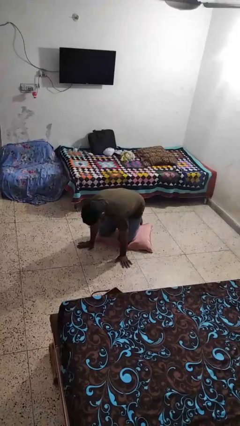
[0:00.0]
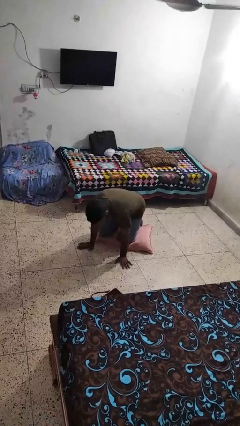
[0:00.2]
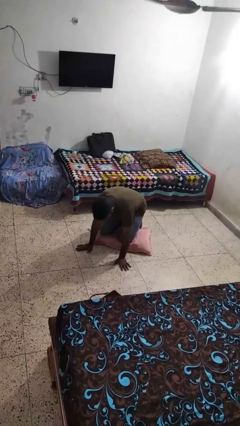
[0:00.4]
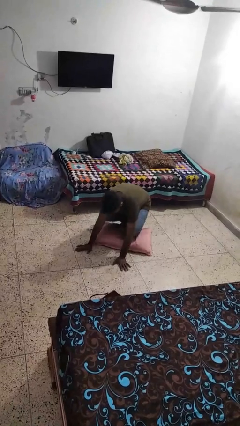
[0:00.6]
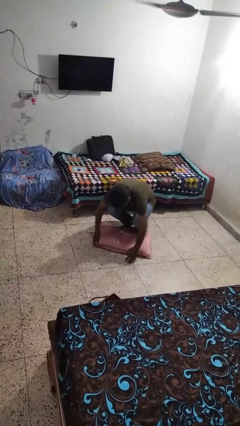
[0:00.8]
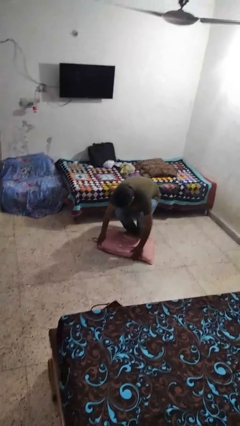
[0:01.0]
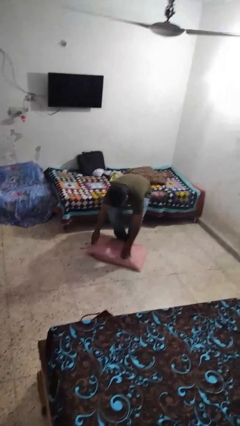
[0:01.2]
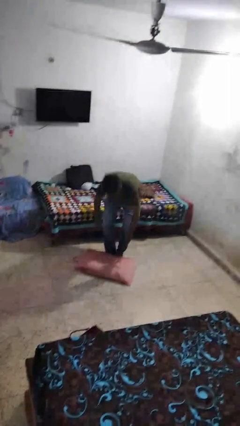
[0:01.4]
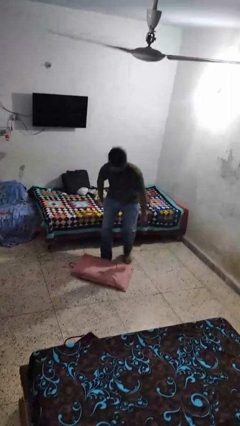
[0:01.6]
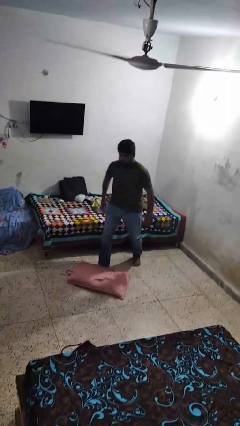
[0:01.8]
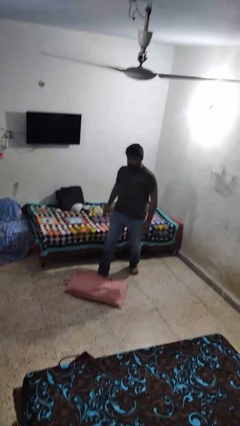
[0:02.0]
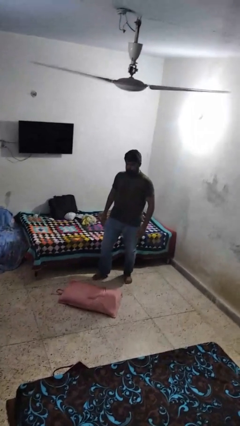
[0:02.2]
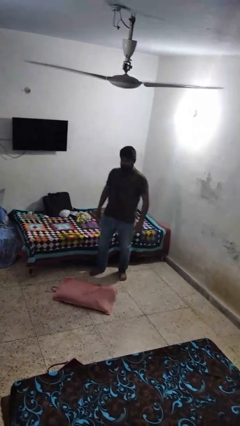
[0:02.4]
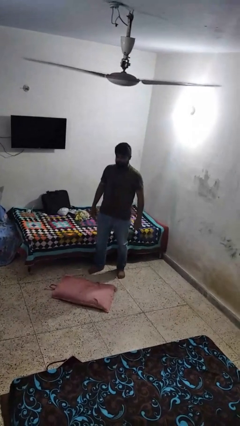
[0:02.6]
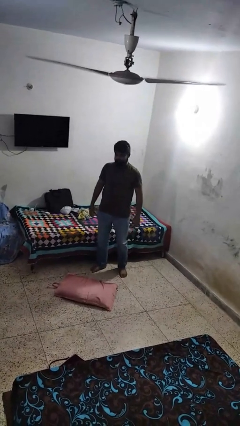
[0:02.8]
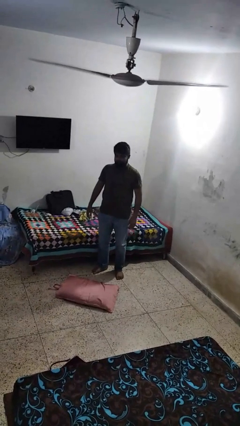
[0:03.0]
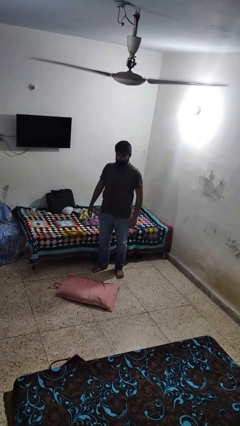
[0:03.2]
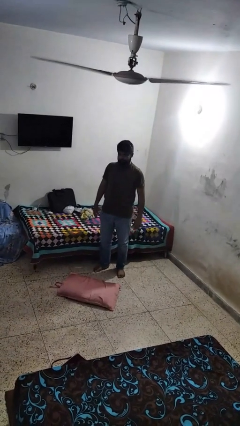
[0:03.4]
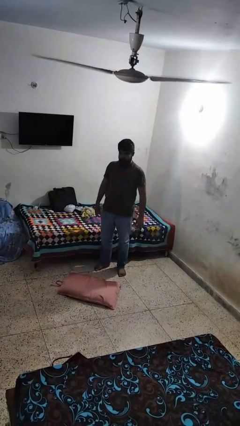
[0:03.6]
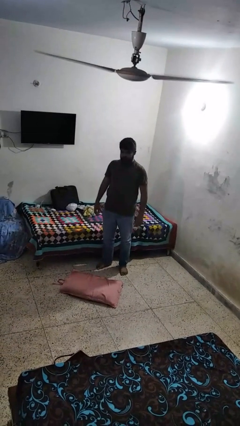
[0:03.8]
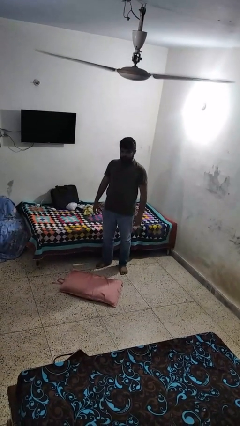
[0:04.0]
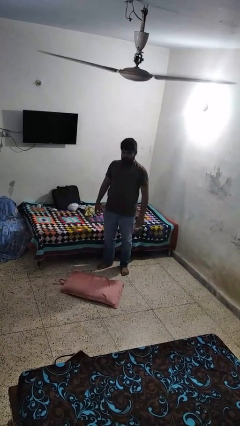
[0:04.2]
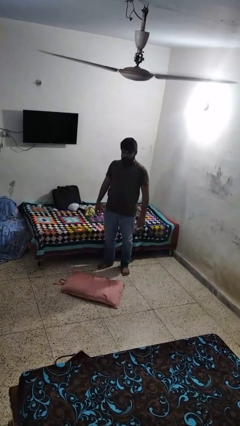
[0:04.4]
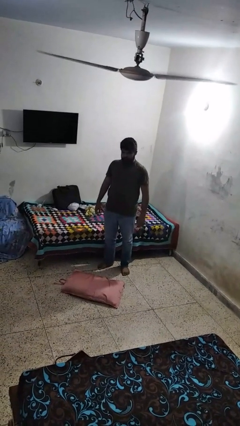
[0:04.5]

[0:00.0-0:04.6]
person stands up from floor

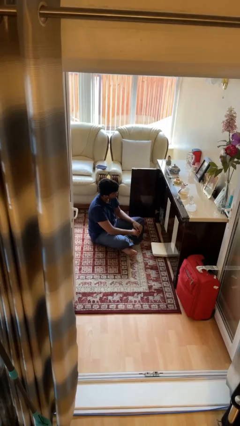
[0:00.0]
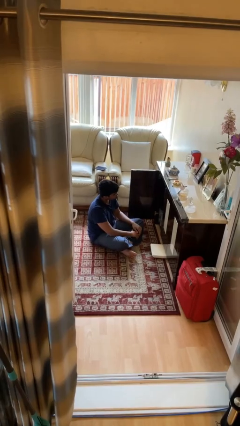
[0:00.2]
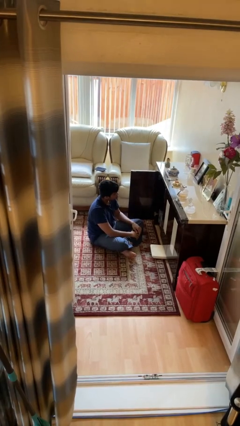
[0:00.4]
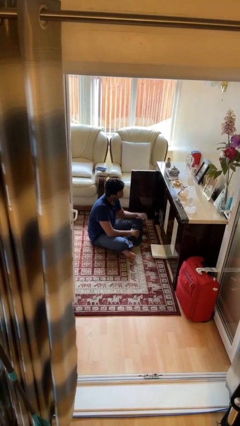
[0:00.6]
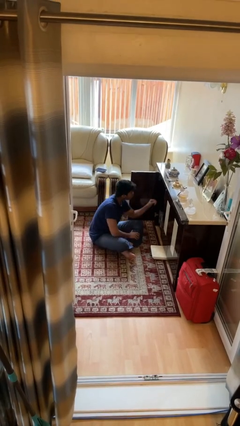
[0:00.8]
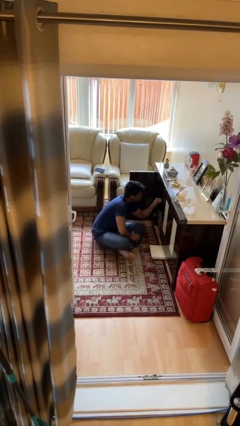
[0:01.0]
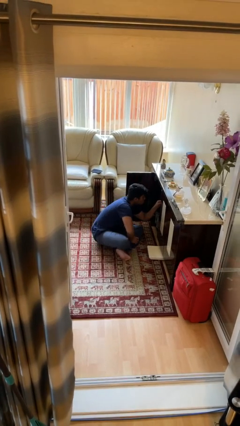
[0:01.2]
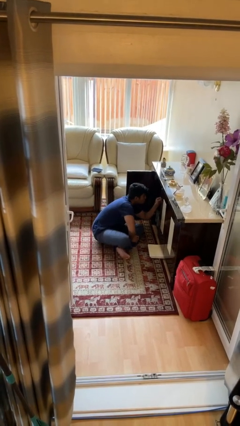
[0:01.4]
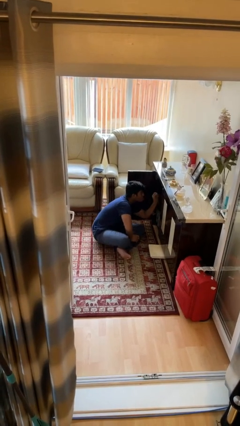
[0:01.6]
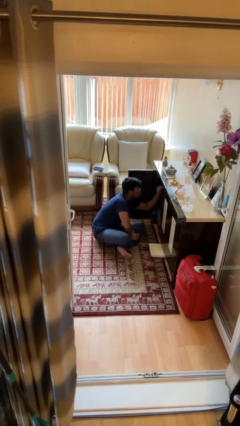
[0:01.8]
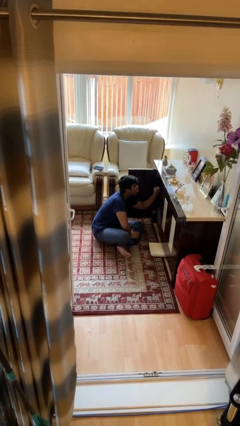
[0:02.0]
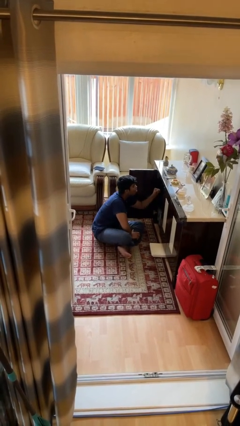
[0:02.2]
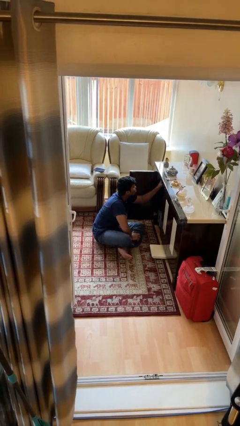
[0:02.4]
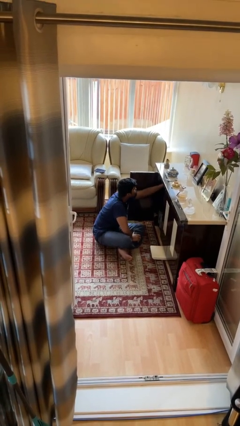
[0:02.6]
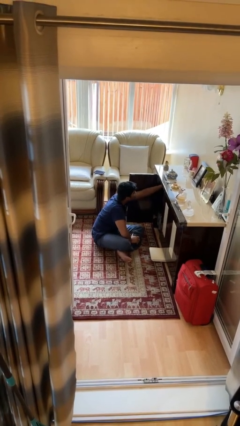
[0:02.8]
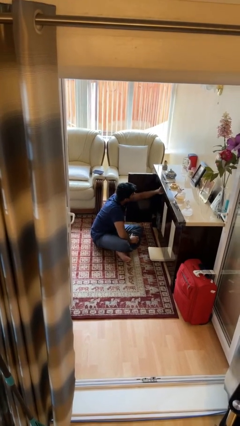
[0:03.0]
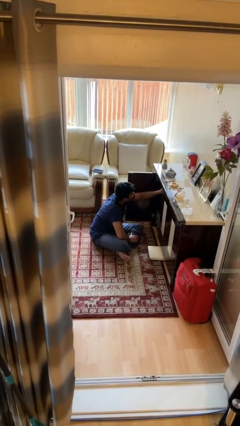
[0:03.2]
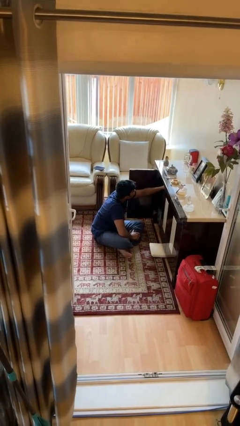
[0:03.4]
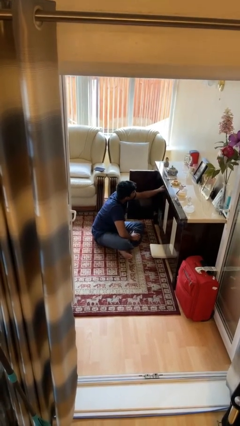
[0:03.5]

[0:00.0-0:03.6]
person searches in cabinet

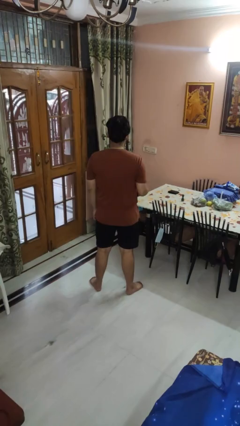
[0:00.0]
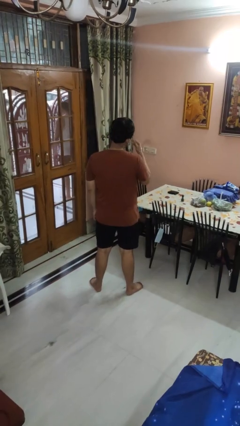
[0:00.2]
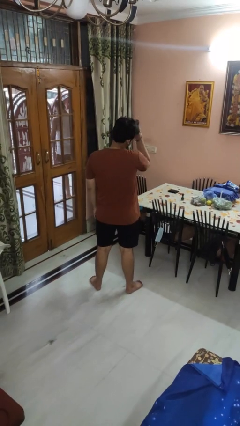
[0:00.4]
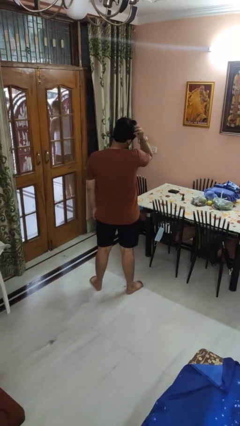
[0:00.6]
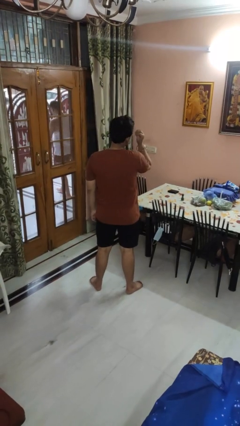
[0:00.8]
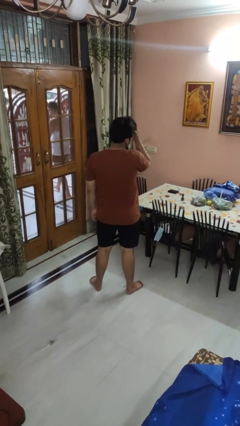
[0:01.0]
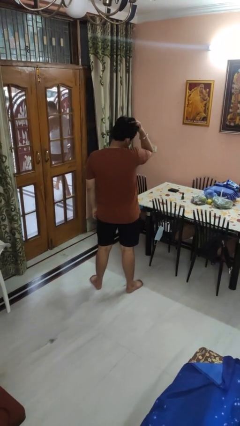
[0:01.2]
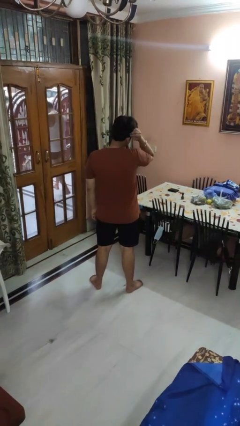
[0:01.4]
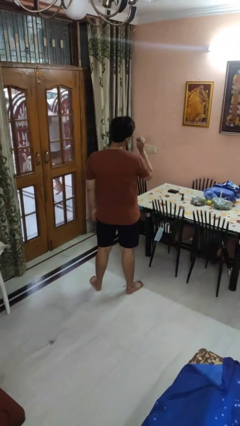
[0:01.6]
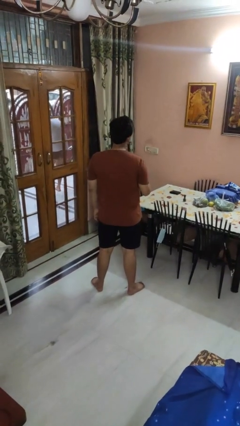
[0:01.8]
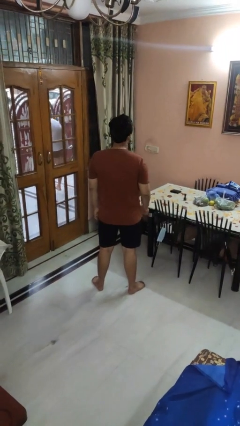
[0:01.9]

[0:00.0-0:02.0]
person strokes hair

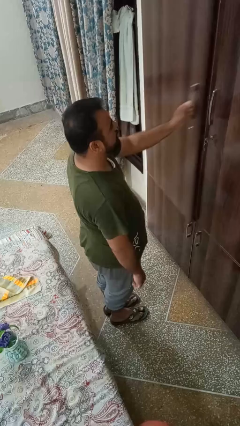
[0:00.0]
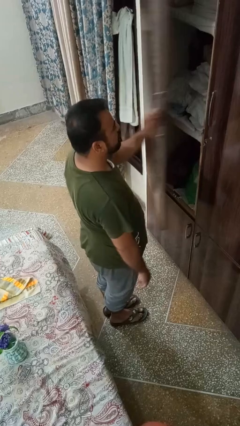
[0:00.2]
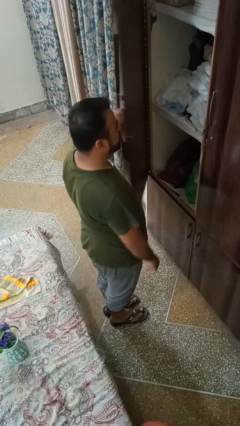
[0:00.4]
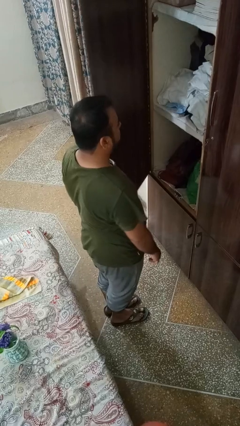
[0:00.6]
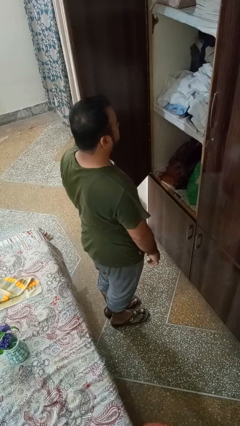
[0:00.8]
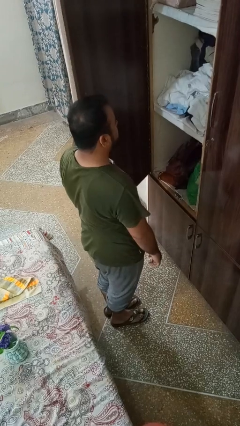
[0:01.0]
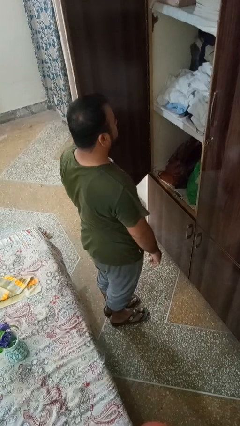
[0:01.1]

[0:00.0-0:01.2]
person opens closet door

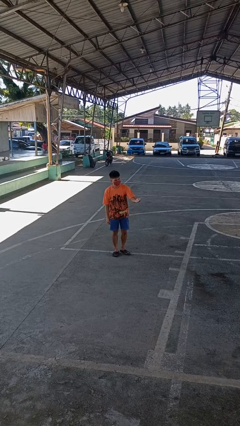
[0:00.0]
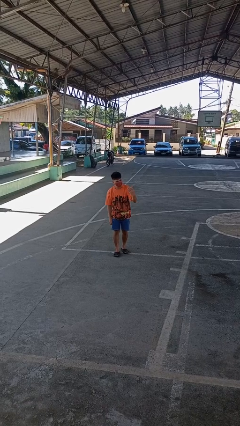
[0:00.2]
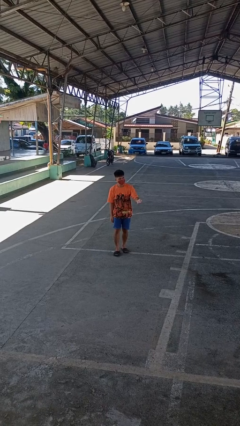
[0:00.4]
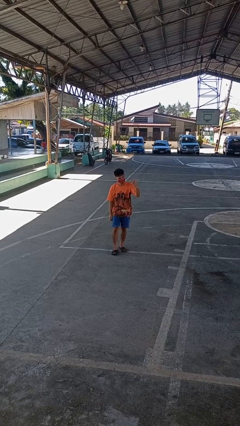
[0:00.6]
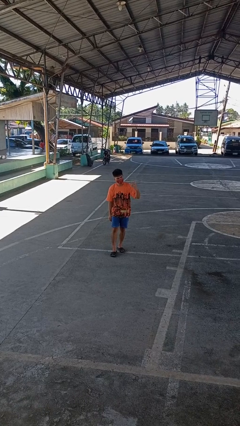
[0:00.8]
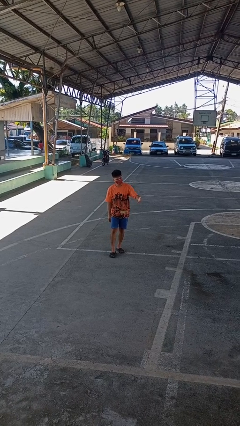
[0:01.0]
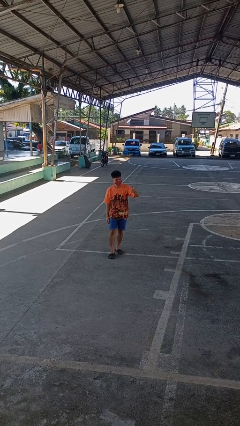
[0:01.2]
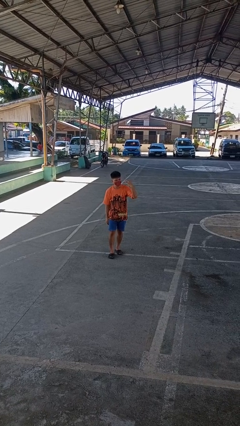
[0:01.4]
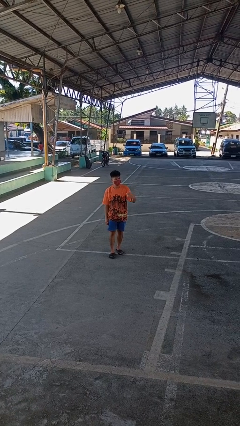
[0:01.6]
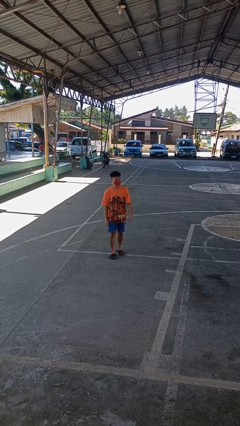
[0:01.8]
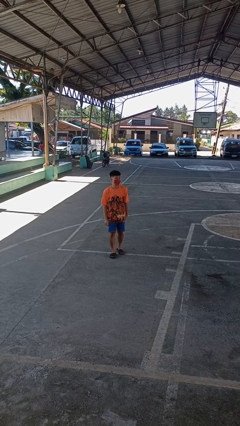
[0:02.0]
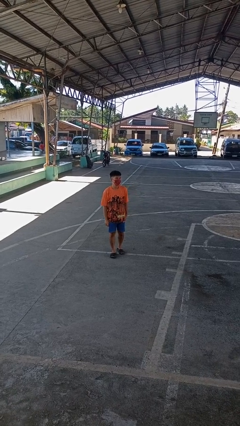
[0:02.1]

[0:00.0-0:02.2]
person gestures come here

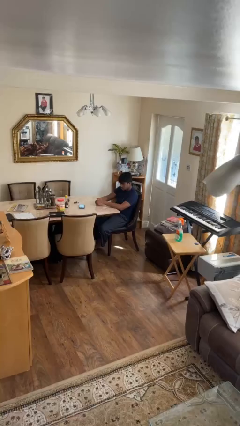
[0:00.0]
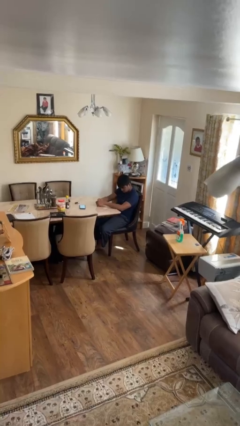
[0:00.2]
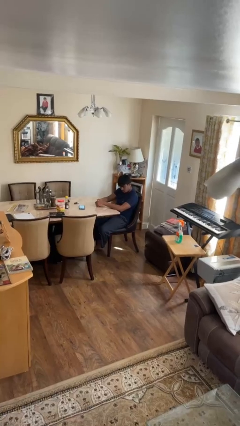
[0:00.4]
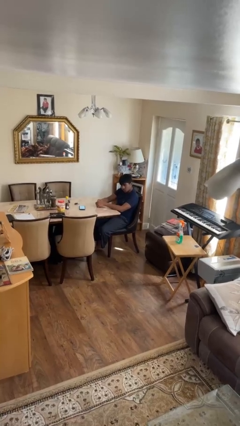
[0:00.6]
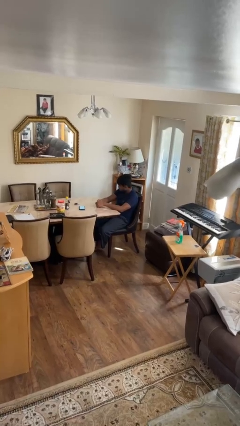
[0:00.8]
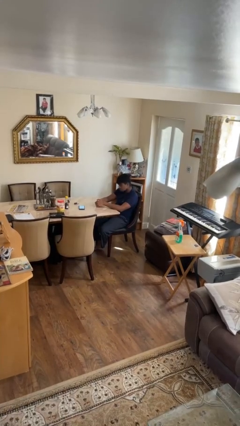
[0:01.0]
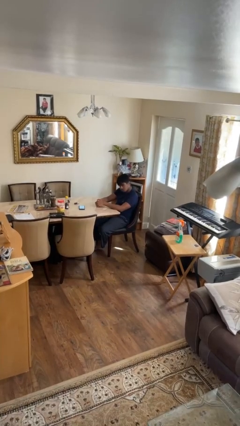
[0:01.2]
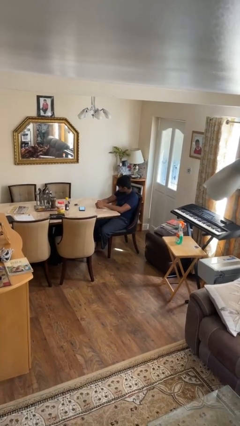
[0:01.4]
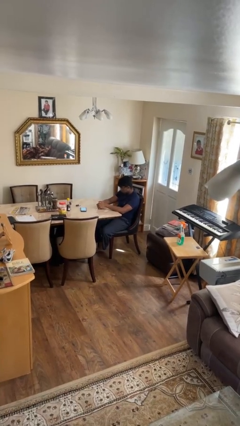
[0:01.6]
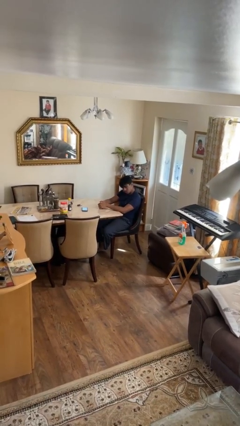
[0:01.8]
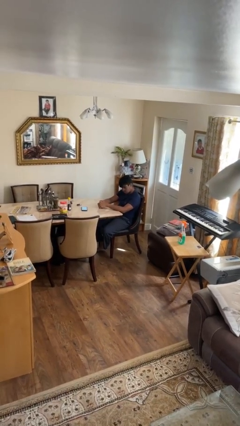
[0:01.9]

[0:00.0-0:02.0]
person shakes head

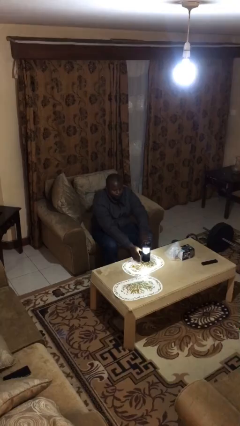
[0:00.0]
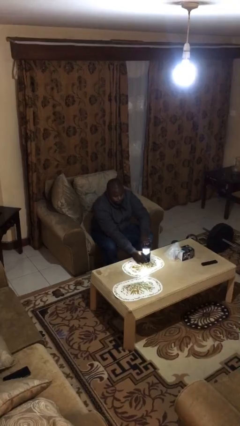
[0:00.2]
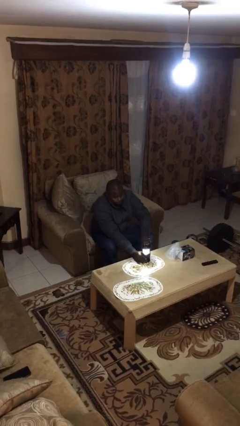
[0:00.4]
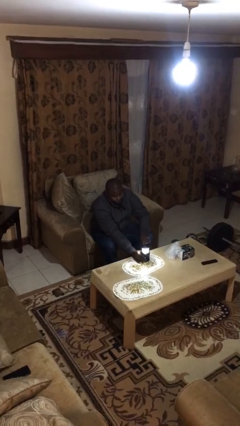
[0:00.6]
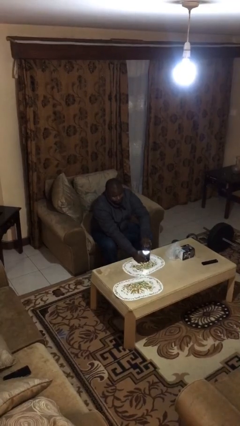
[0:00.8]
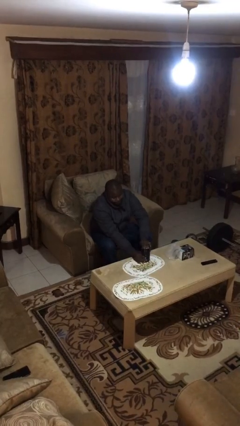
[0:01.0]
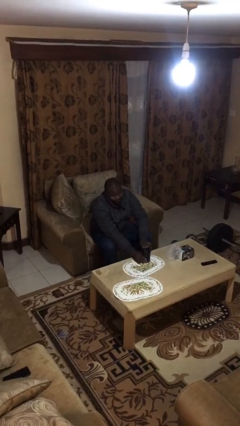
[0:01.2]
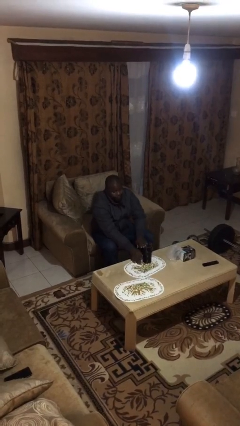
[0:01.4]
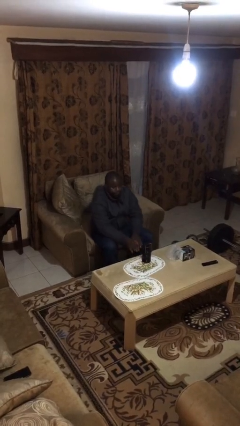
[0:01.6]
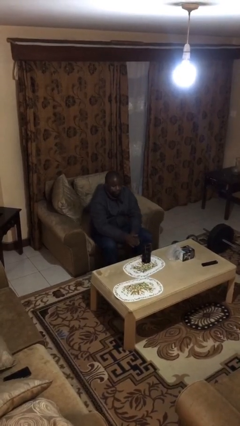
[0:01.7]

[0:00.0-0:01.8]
person turns off lamp
